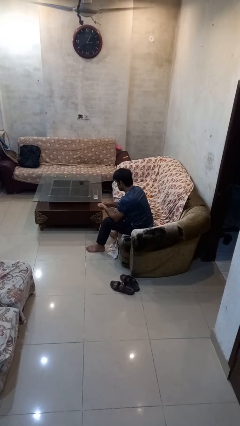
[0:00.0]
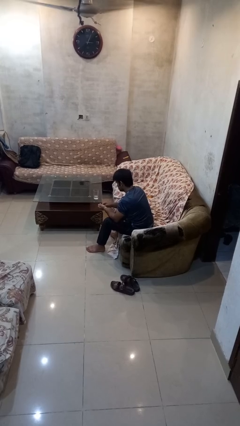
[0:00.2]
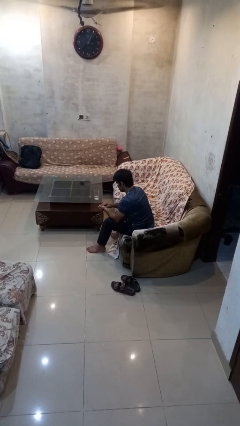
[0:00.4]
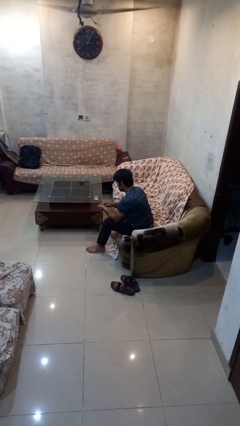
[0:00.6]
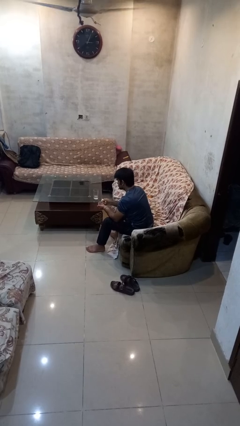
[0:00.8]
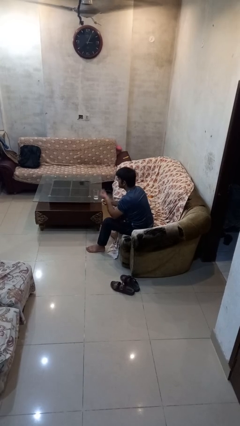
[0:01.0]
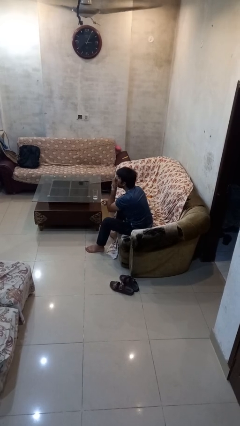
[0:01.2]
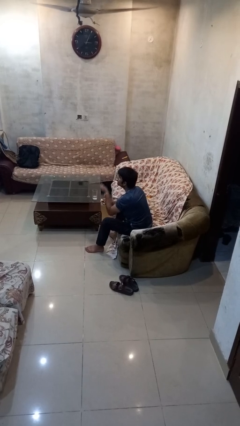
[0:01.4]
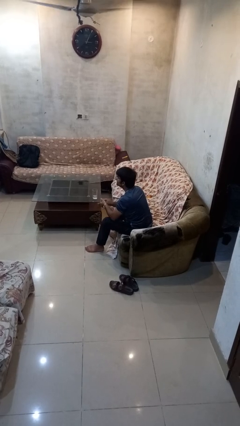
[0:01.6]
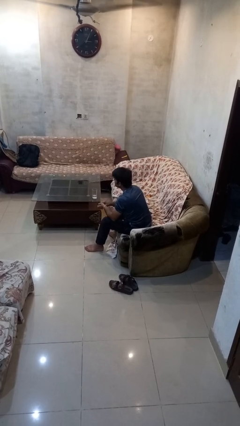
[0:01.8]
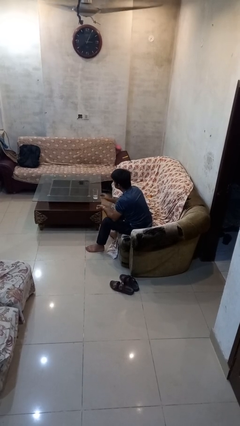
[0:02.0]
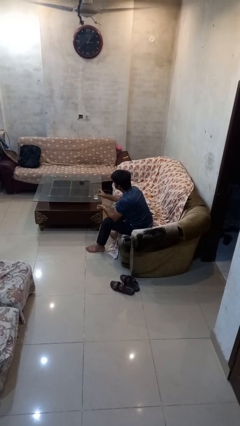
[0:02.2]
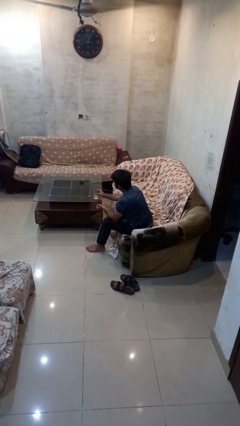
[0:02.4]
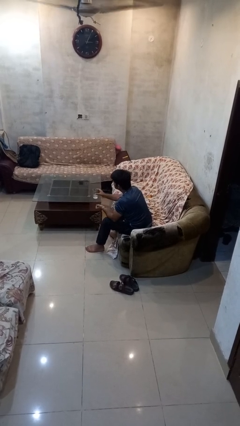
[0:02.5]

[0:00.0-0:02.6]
person takes medicine pills

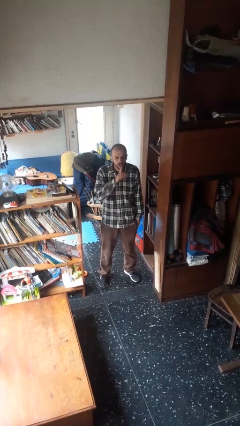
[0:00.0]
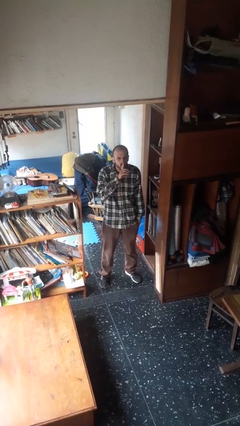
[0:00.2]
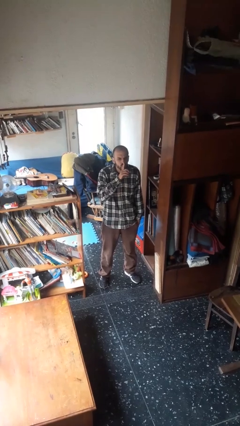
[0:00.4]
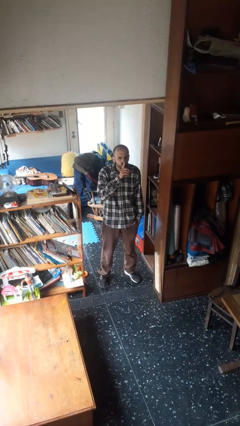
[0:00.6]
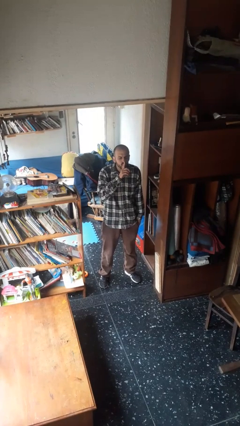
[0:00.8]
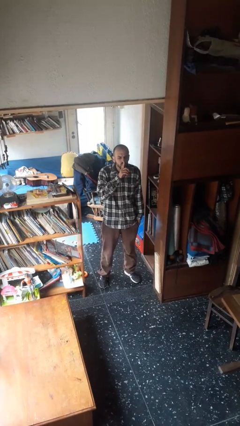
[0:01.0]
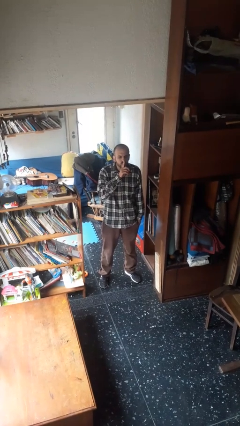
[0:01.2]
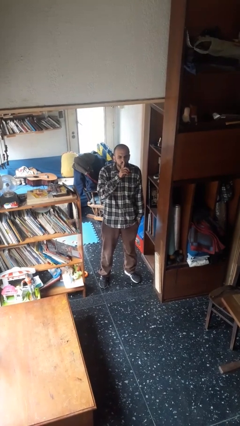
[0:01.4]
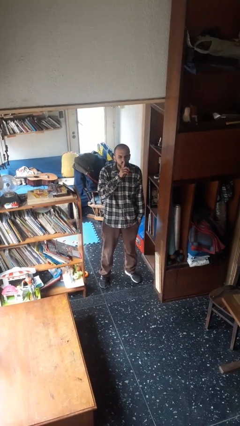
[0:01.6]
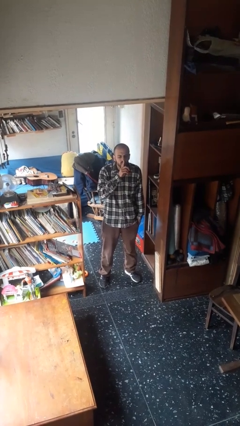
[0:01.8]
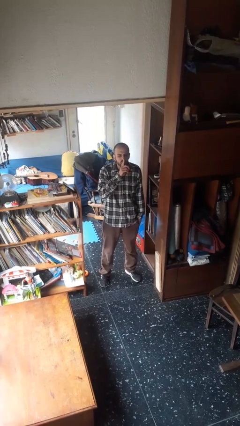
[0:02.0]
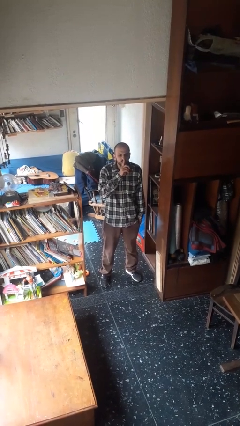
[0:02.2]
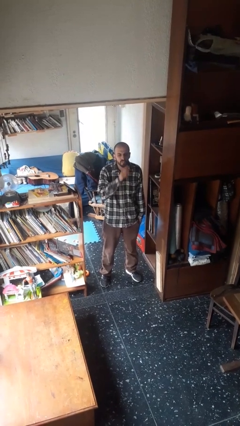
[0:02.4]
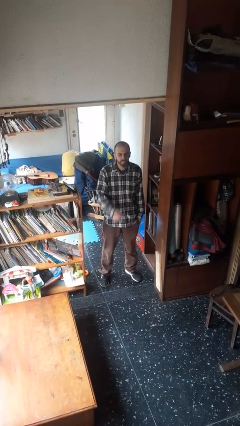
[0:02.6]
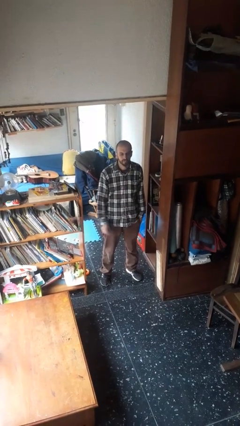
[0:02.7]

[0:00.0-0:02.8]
person gestures be quiet

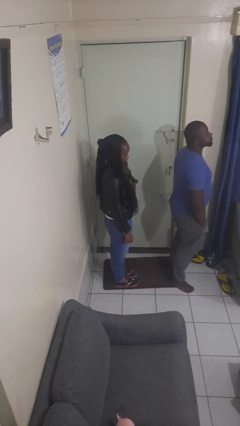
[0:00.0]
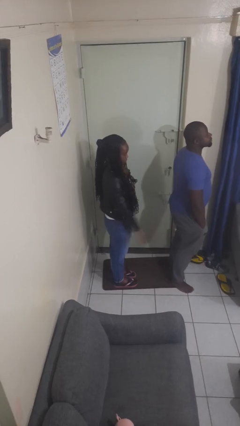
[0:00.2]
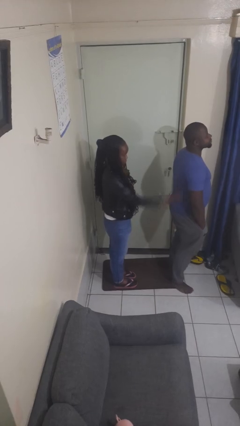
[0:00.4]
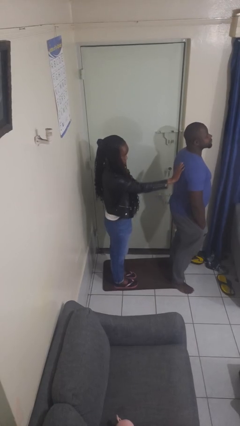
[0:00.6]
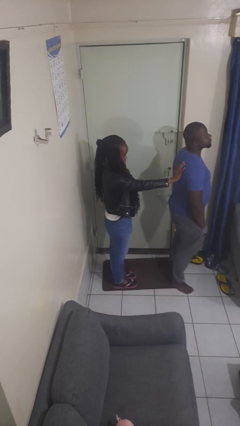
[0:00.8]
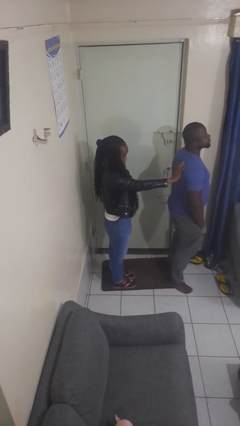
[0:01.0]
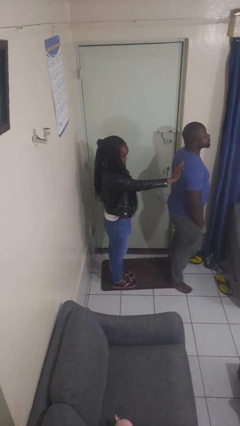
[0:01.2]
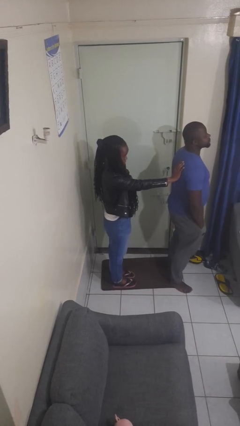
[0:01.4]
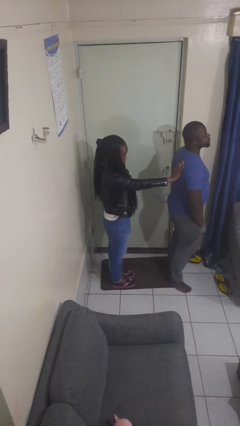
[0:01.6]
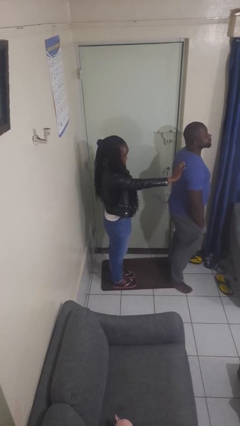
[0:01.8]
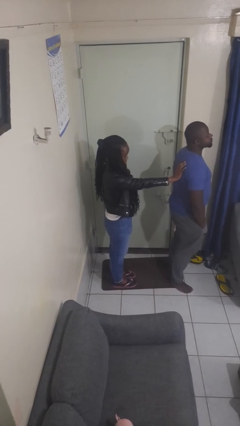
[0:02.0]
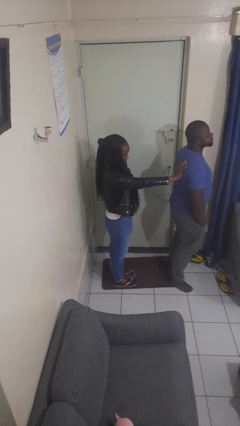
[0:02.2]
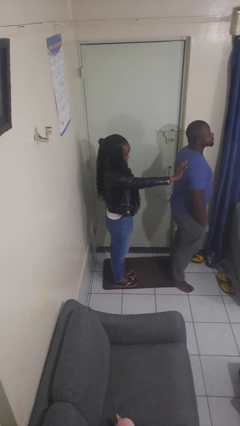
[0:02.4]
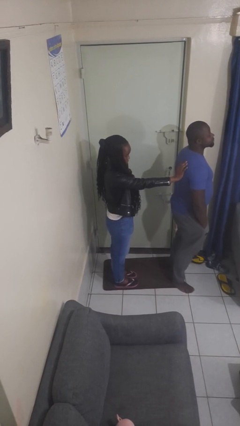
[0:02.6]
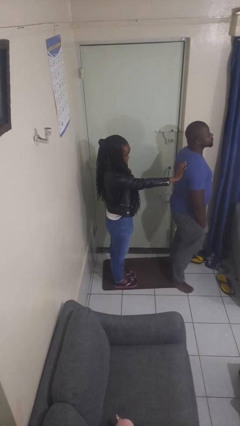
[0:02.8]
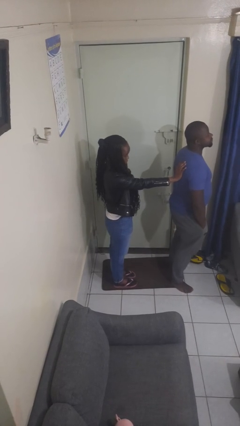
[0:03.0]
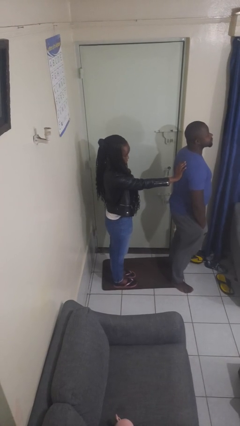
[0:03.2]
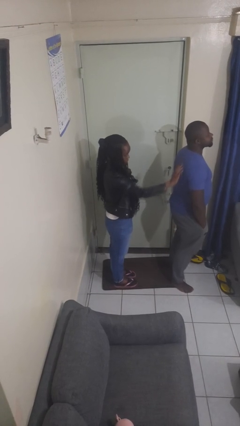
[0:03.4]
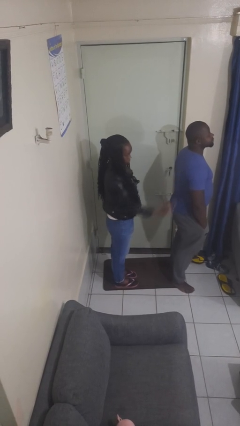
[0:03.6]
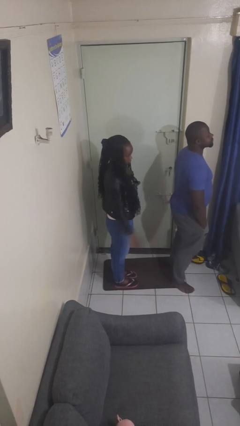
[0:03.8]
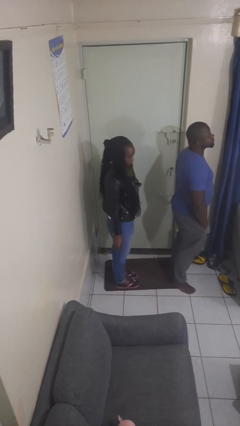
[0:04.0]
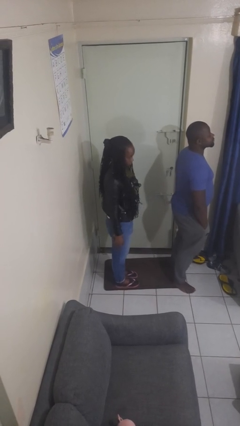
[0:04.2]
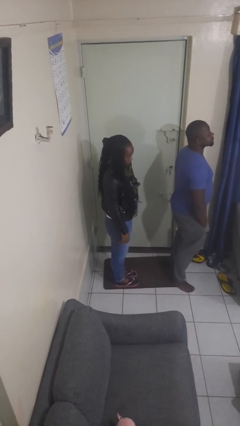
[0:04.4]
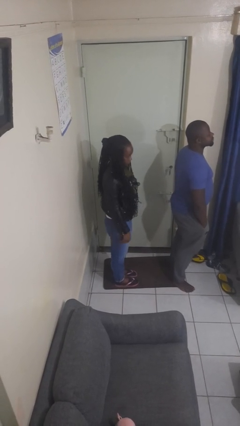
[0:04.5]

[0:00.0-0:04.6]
person touches back of person

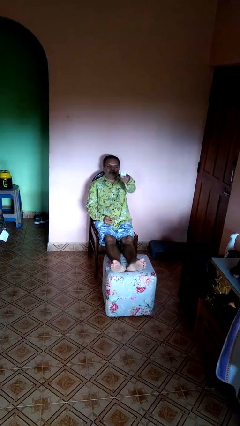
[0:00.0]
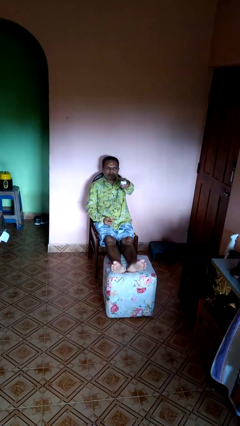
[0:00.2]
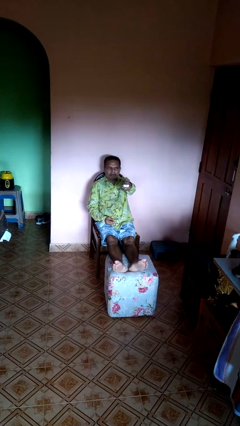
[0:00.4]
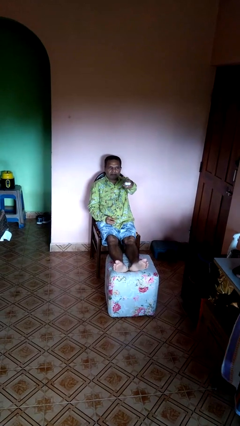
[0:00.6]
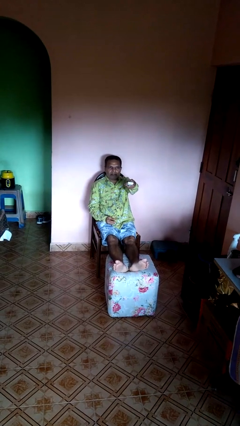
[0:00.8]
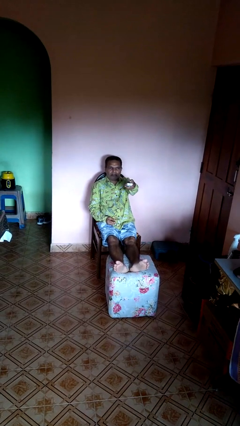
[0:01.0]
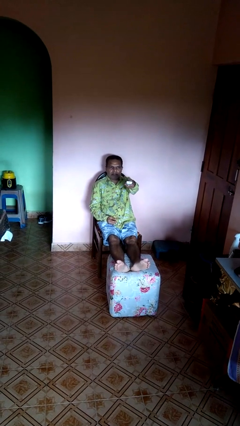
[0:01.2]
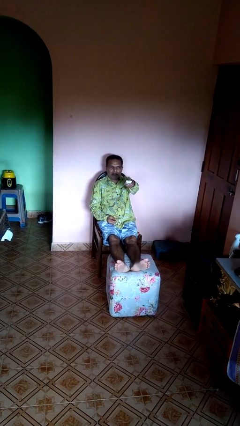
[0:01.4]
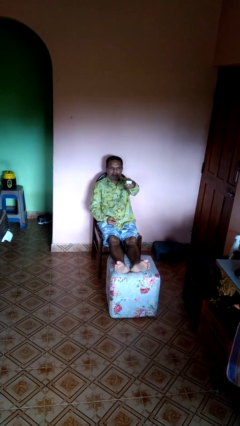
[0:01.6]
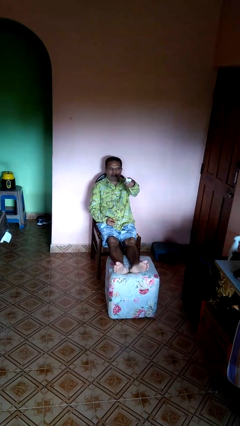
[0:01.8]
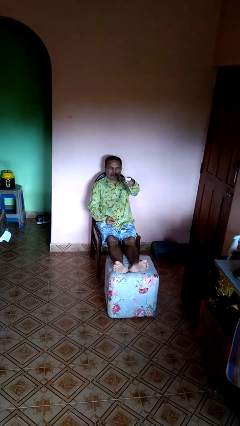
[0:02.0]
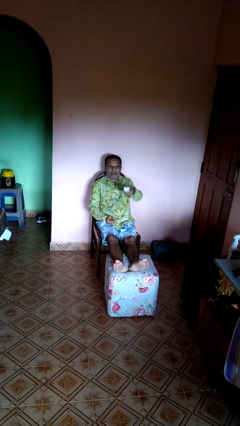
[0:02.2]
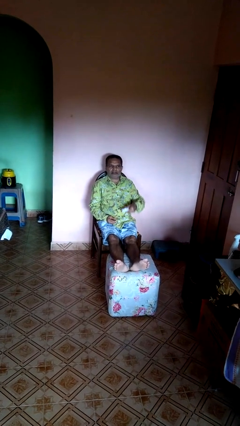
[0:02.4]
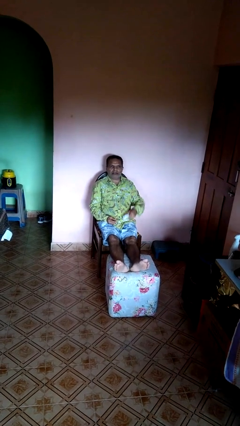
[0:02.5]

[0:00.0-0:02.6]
person uses television remote

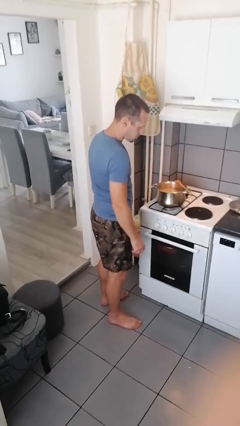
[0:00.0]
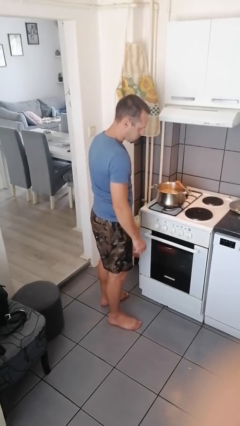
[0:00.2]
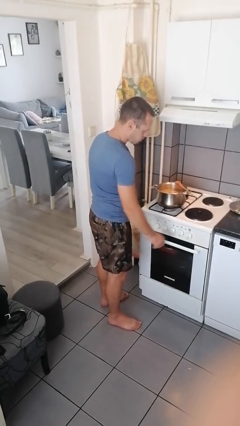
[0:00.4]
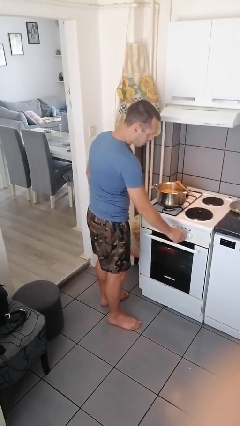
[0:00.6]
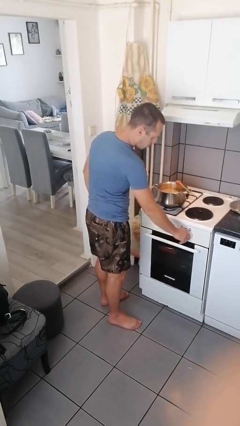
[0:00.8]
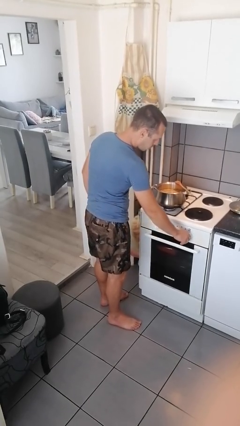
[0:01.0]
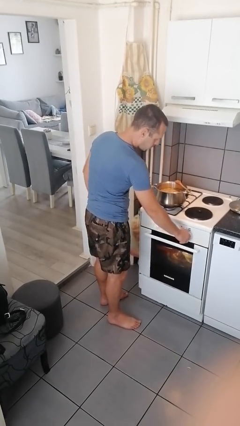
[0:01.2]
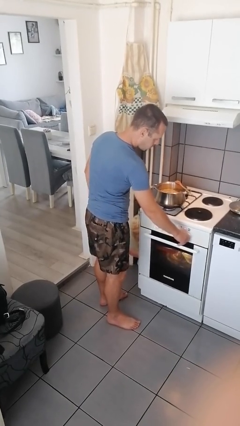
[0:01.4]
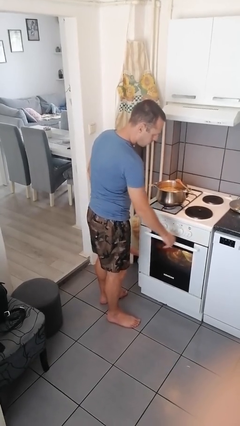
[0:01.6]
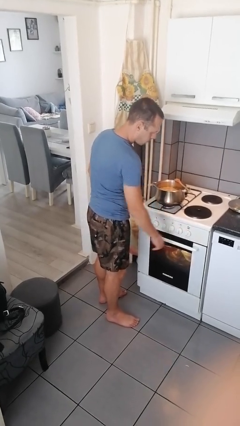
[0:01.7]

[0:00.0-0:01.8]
person turns on stovetop

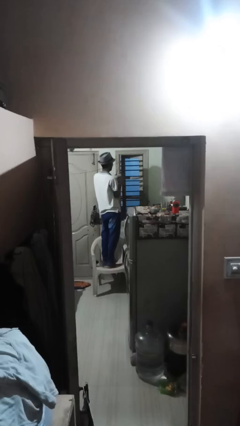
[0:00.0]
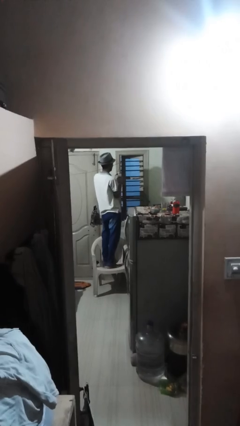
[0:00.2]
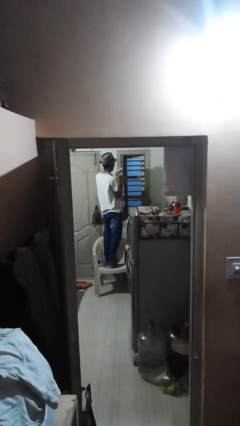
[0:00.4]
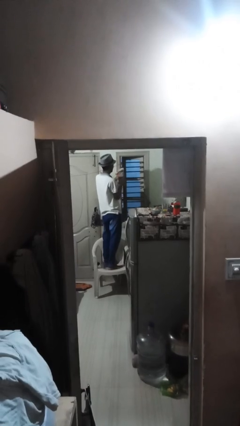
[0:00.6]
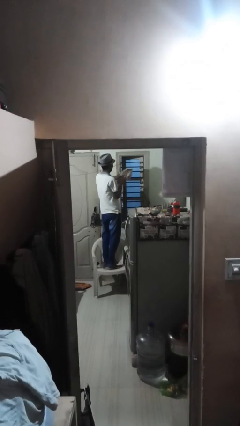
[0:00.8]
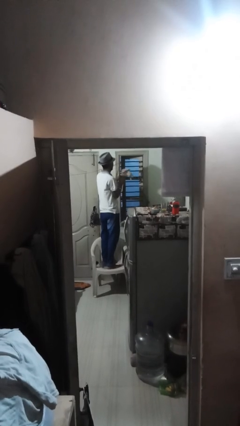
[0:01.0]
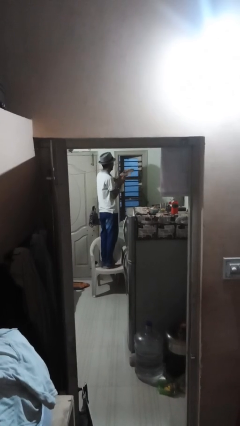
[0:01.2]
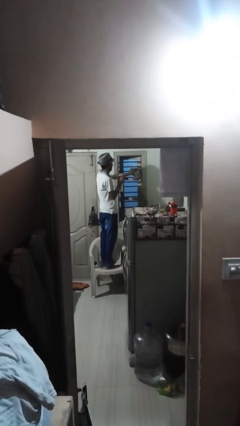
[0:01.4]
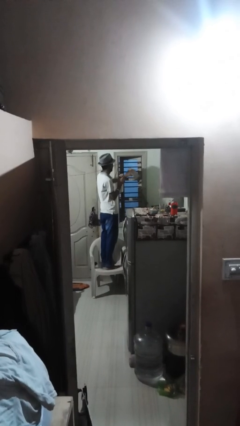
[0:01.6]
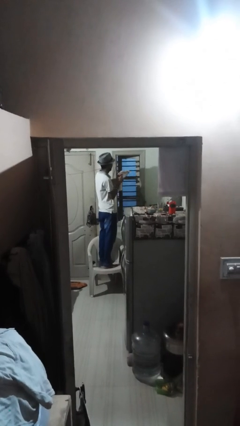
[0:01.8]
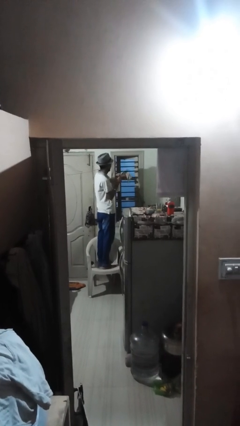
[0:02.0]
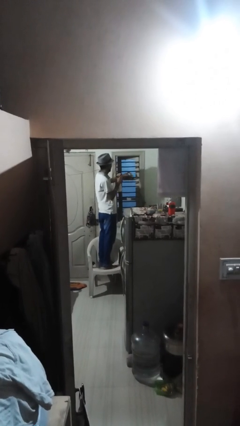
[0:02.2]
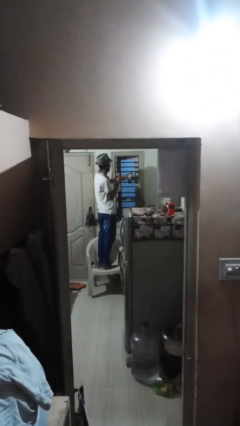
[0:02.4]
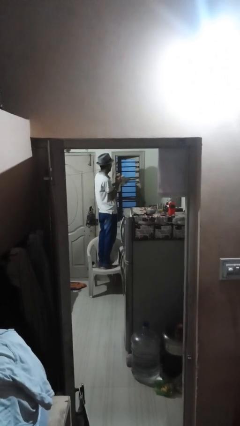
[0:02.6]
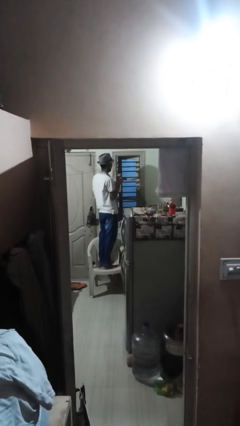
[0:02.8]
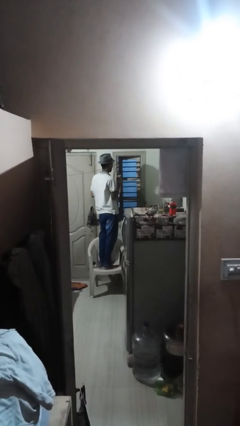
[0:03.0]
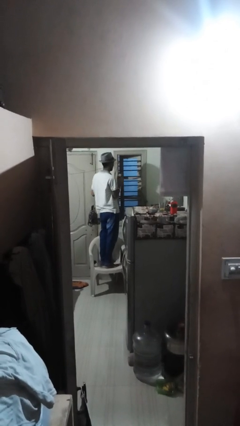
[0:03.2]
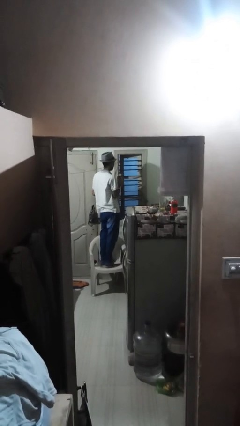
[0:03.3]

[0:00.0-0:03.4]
person washes window
